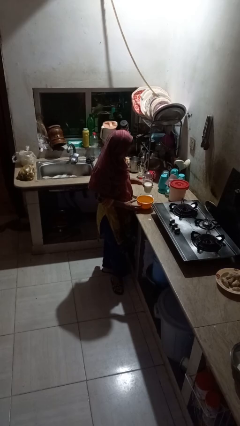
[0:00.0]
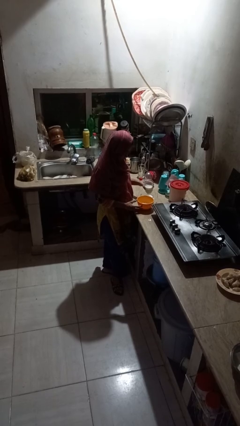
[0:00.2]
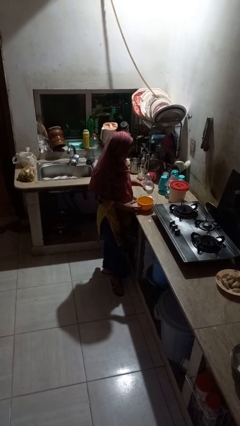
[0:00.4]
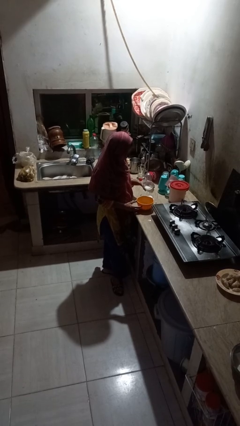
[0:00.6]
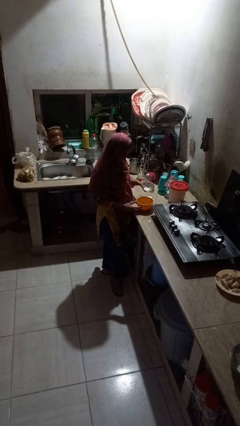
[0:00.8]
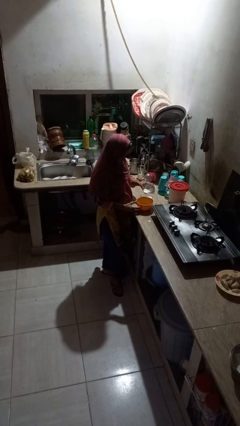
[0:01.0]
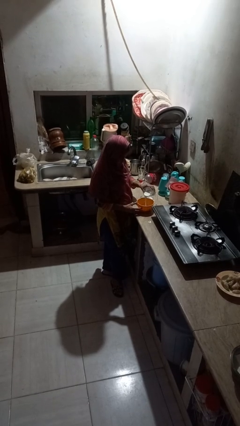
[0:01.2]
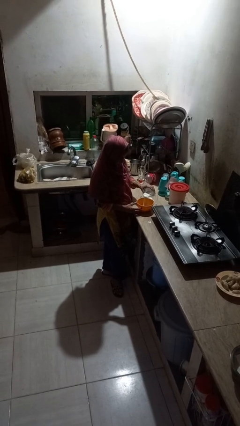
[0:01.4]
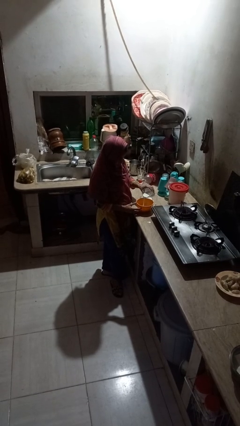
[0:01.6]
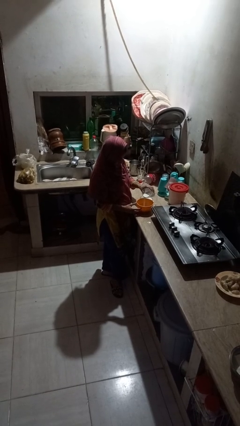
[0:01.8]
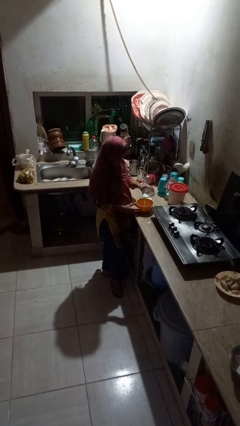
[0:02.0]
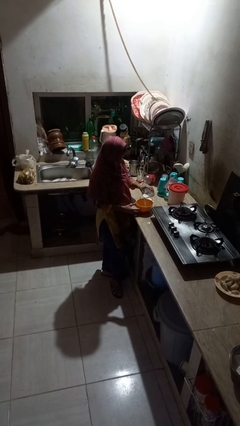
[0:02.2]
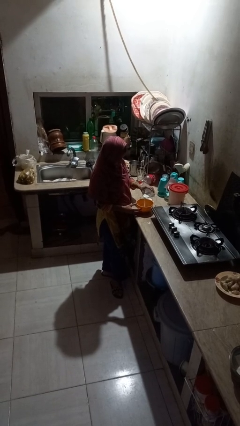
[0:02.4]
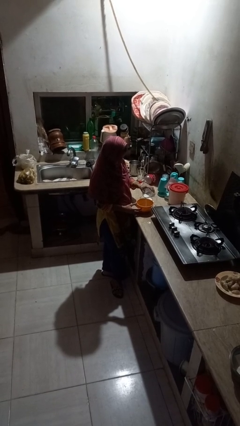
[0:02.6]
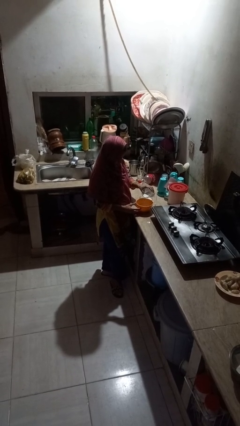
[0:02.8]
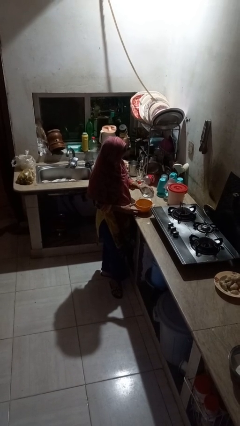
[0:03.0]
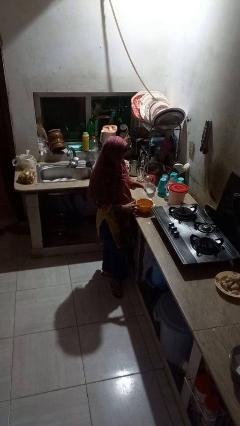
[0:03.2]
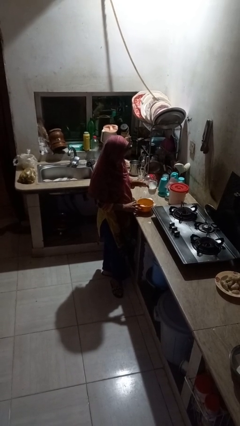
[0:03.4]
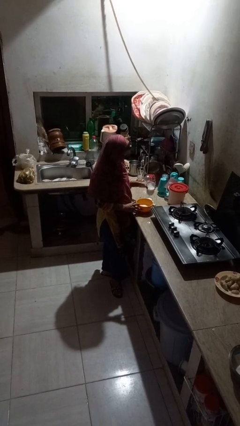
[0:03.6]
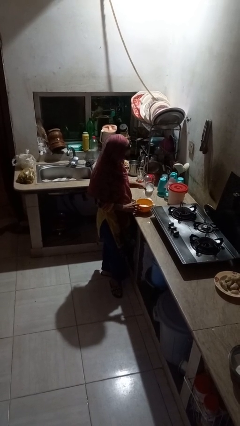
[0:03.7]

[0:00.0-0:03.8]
person pours into bowl

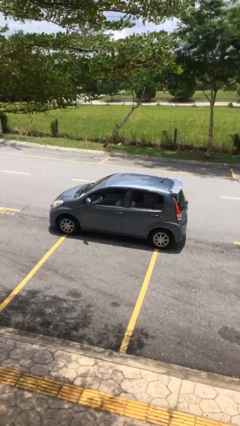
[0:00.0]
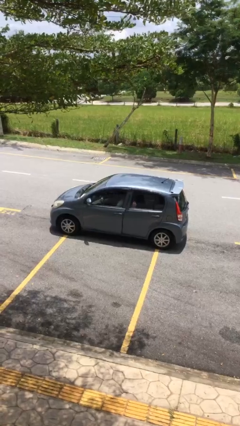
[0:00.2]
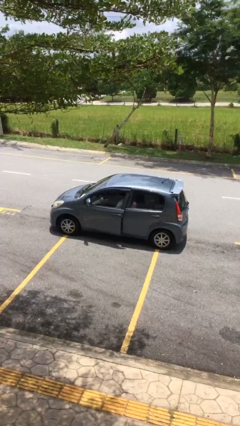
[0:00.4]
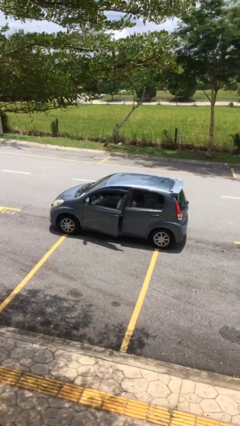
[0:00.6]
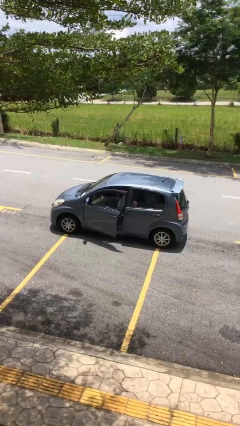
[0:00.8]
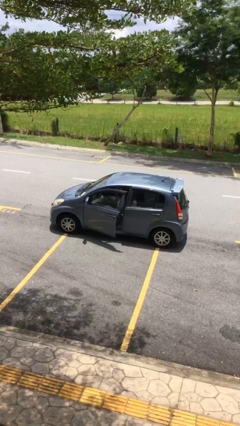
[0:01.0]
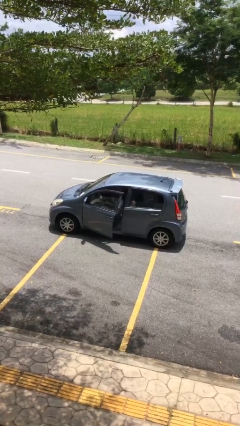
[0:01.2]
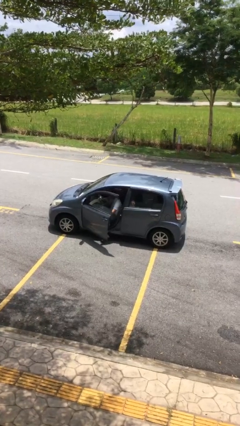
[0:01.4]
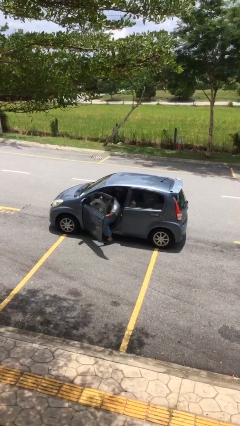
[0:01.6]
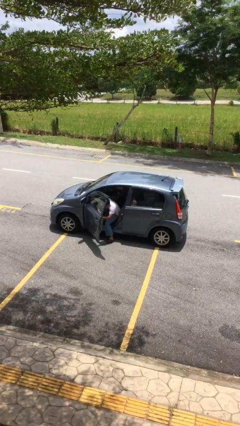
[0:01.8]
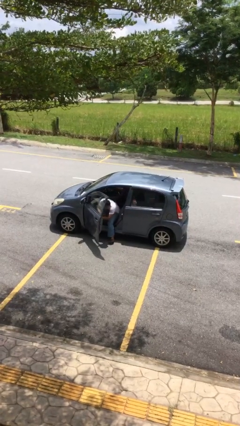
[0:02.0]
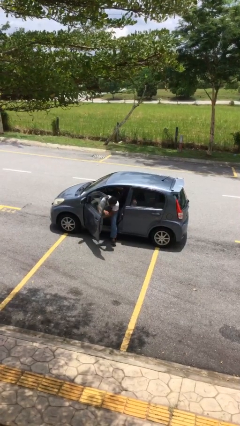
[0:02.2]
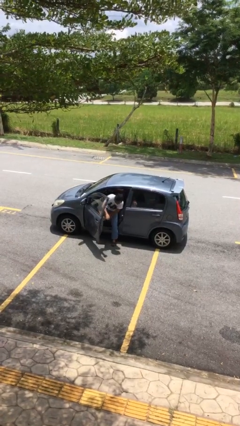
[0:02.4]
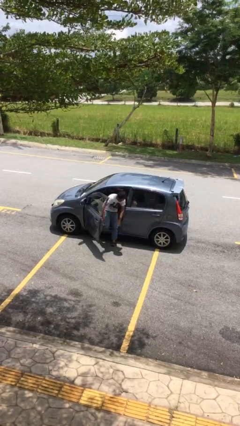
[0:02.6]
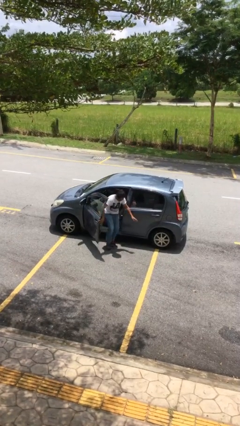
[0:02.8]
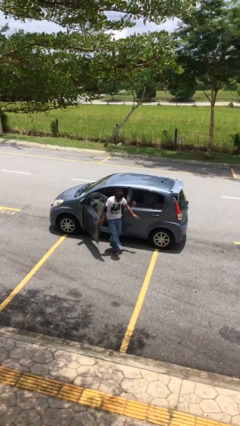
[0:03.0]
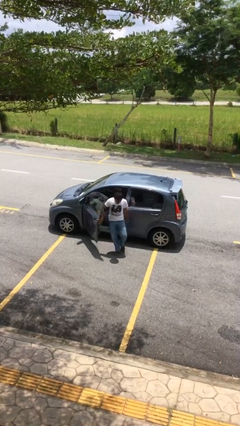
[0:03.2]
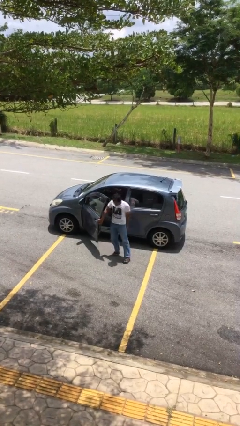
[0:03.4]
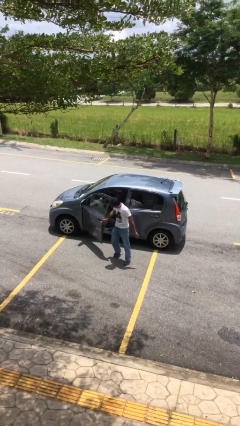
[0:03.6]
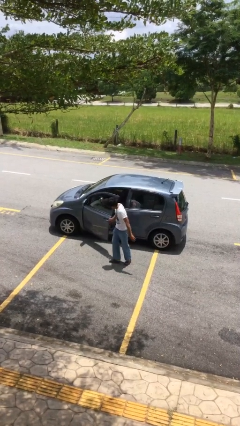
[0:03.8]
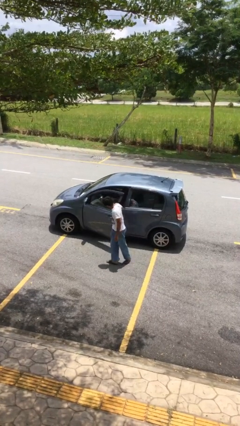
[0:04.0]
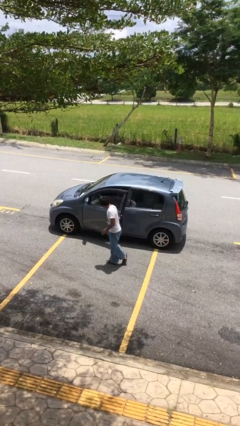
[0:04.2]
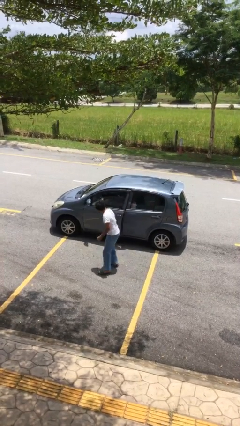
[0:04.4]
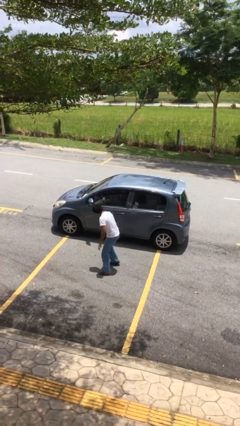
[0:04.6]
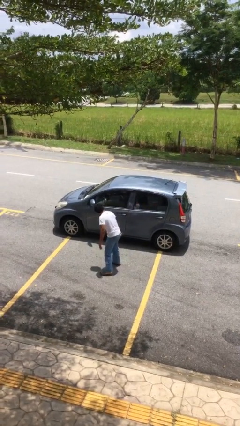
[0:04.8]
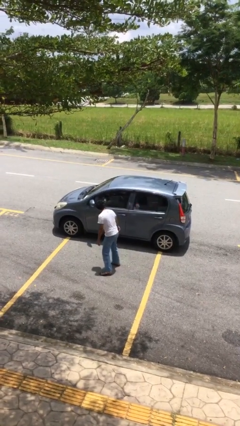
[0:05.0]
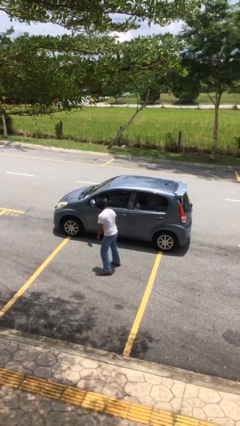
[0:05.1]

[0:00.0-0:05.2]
car drops off person

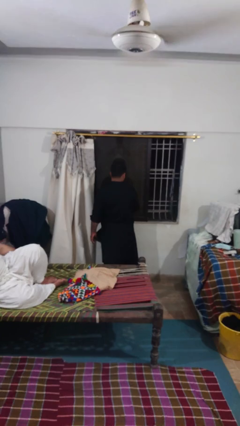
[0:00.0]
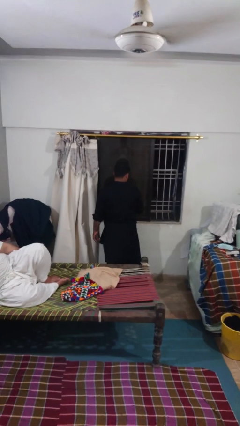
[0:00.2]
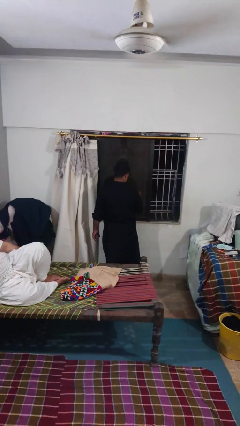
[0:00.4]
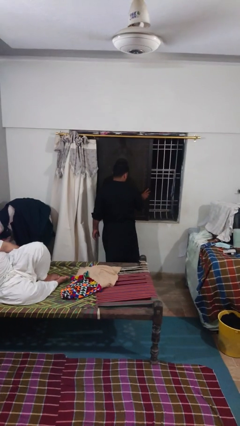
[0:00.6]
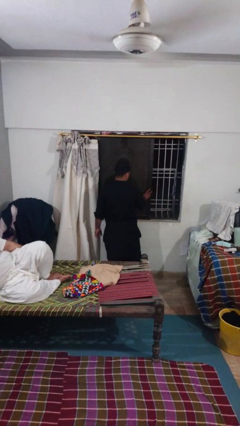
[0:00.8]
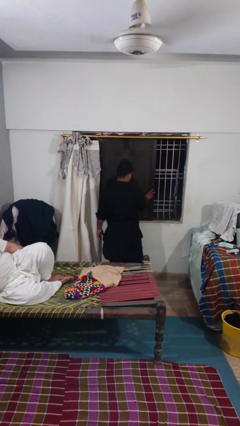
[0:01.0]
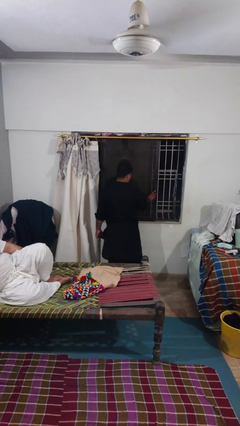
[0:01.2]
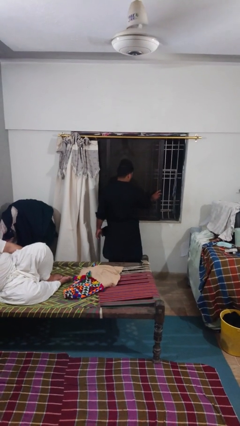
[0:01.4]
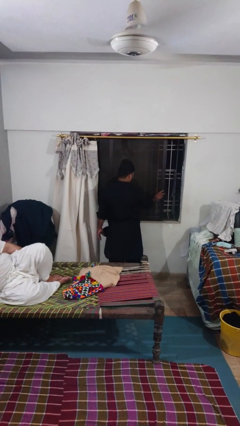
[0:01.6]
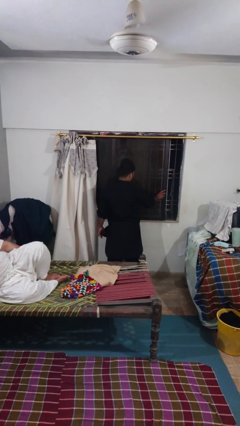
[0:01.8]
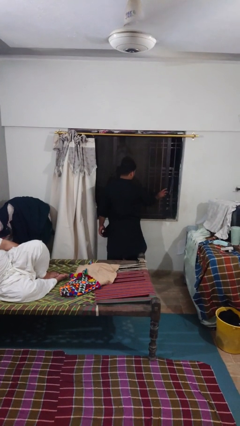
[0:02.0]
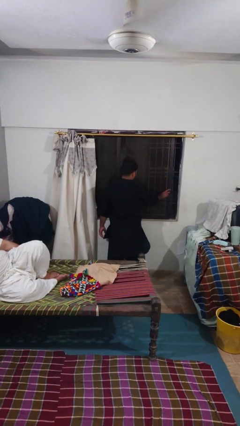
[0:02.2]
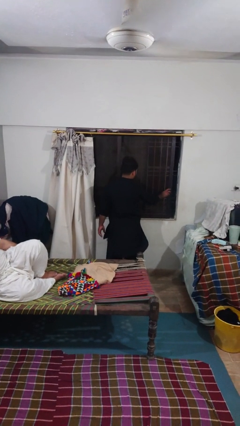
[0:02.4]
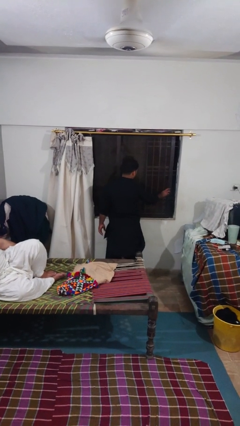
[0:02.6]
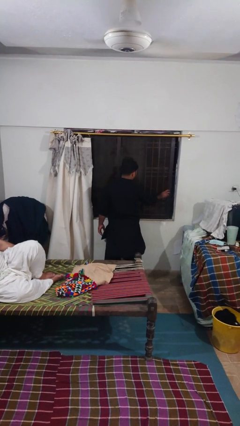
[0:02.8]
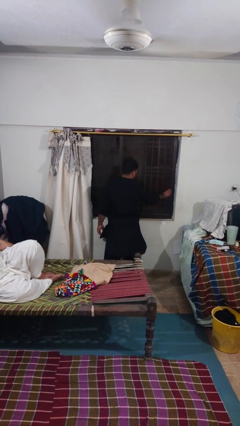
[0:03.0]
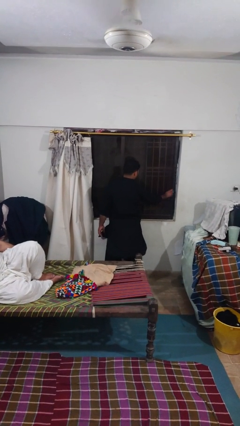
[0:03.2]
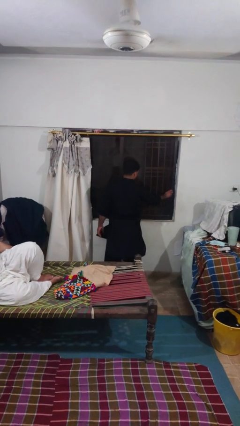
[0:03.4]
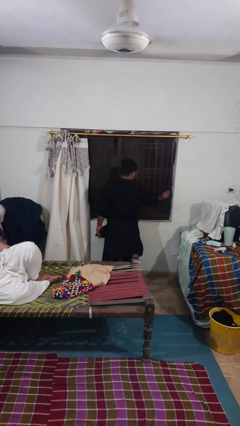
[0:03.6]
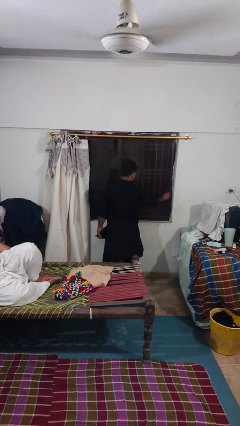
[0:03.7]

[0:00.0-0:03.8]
person closes sliding door

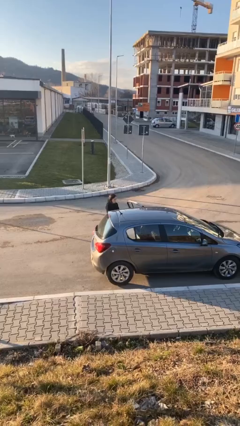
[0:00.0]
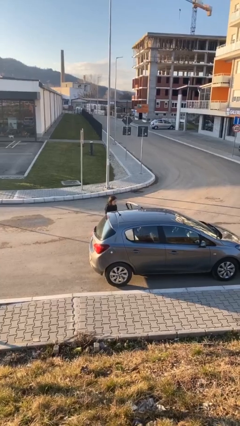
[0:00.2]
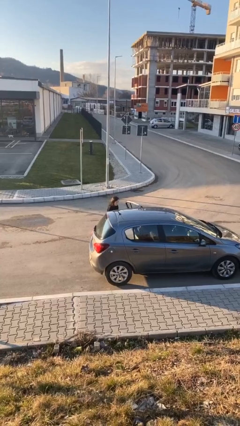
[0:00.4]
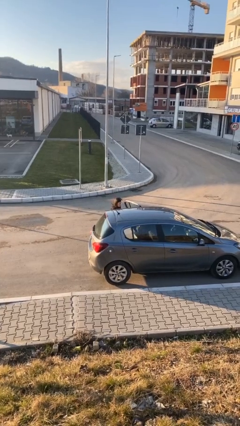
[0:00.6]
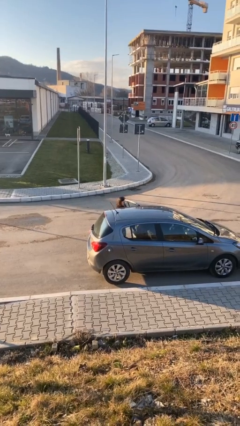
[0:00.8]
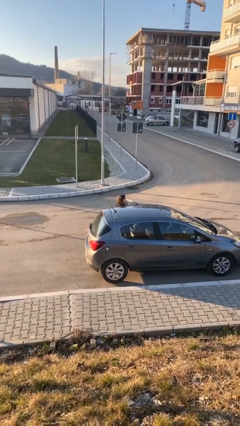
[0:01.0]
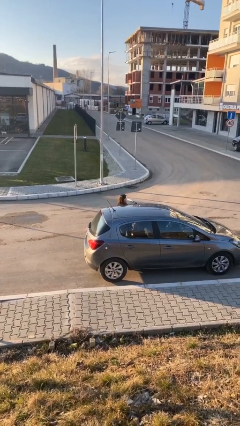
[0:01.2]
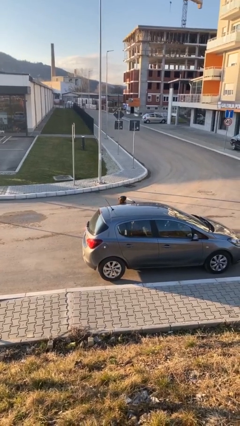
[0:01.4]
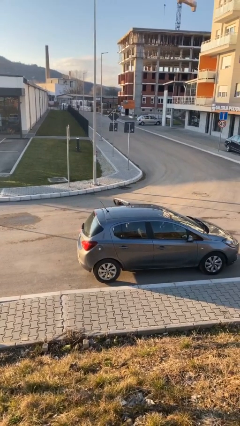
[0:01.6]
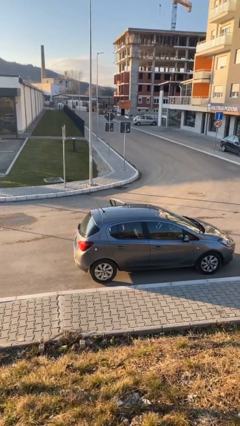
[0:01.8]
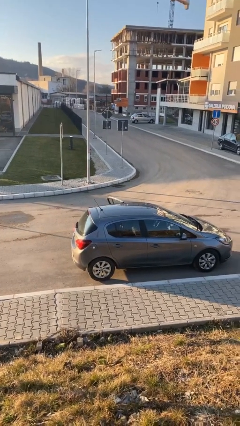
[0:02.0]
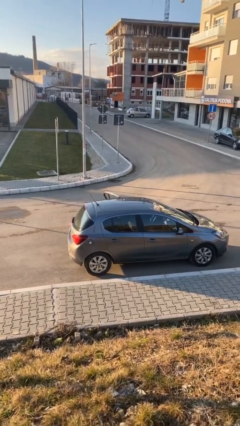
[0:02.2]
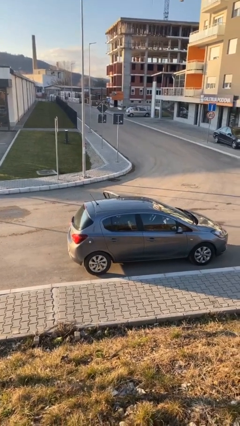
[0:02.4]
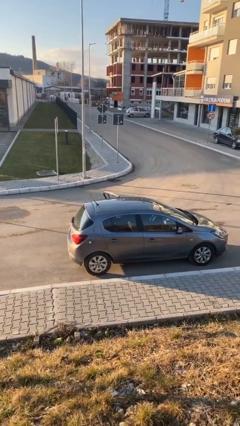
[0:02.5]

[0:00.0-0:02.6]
person enters car

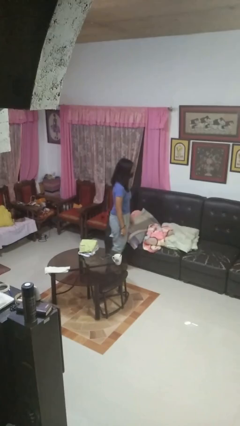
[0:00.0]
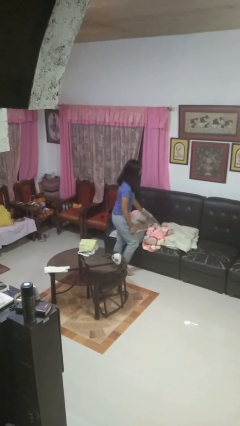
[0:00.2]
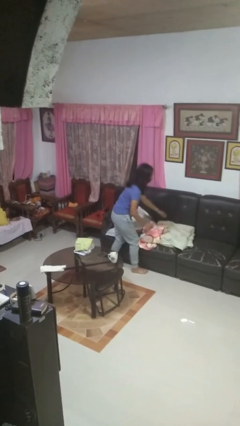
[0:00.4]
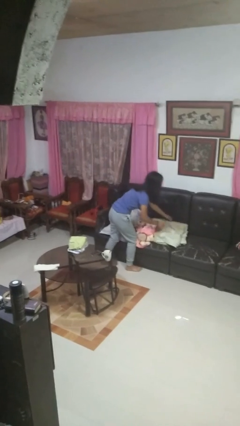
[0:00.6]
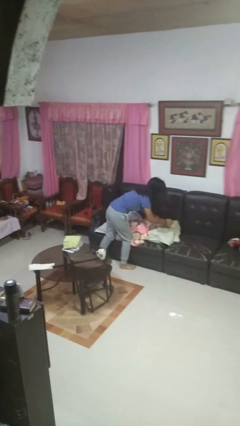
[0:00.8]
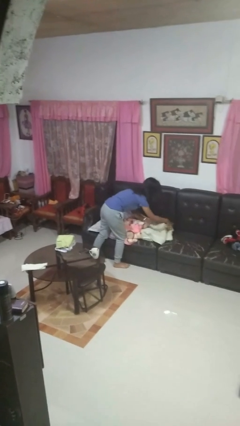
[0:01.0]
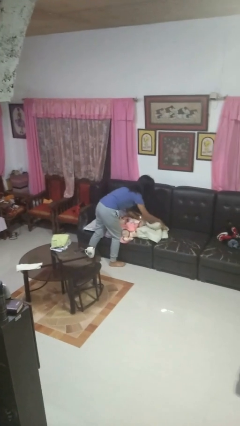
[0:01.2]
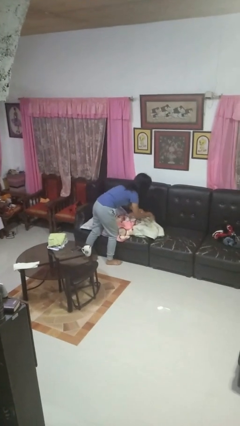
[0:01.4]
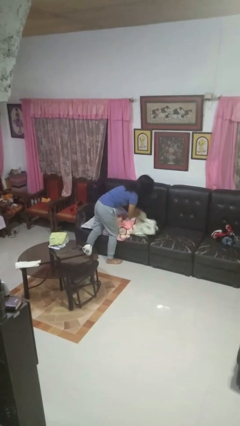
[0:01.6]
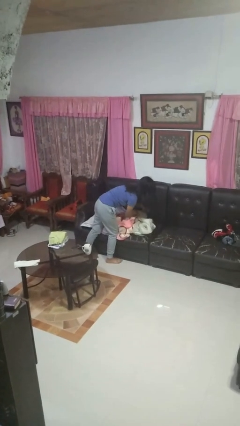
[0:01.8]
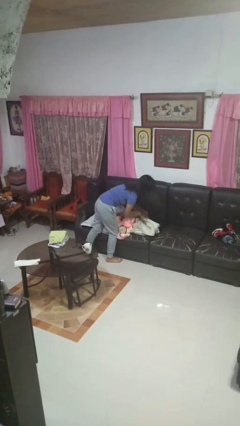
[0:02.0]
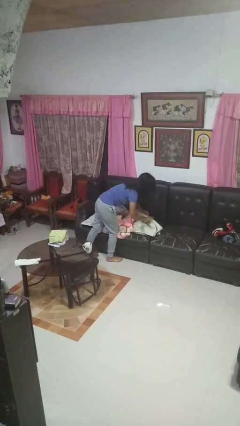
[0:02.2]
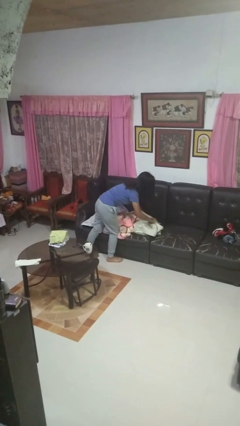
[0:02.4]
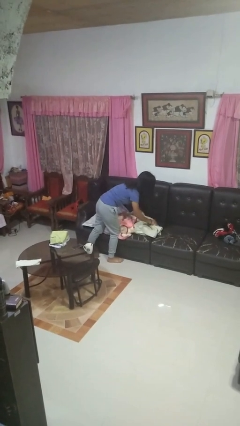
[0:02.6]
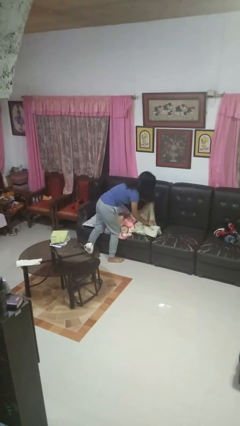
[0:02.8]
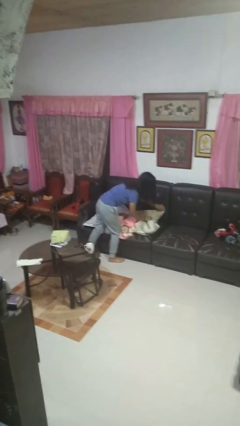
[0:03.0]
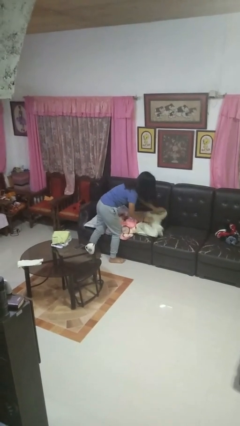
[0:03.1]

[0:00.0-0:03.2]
person searches in couch
